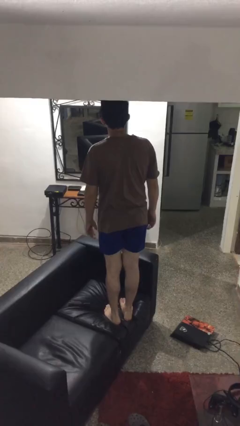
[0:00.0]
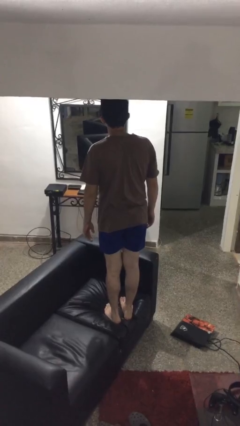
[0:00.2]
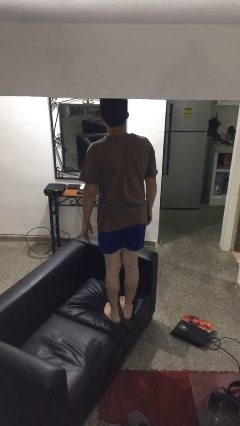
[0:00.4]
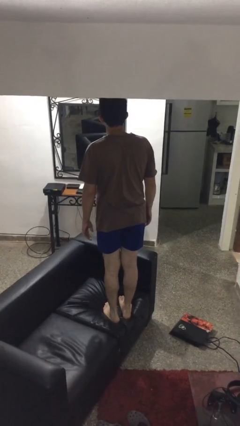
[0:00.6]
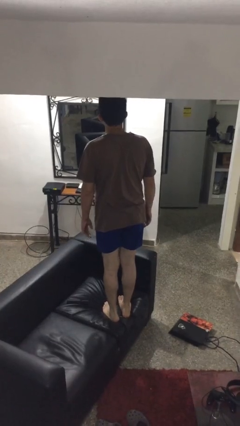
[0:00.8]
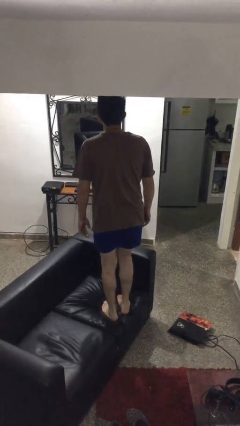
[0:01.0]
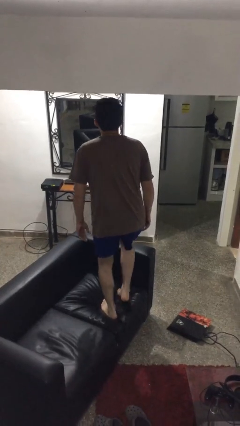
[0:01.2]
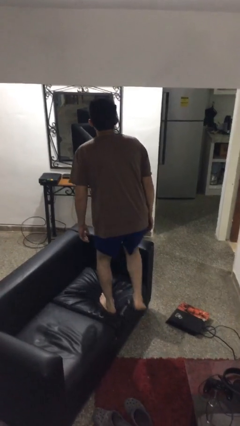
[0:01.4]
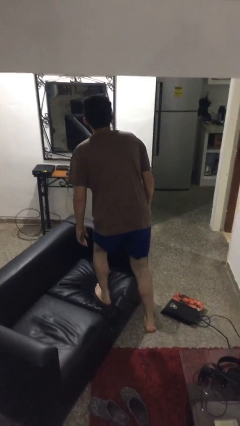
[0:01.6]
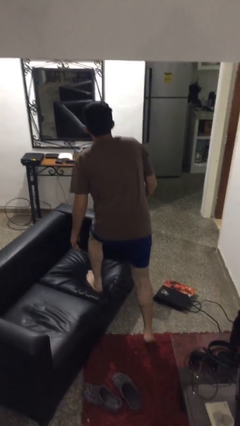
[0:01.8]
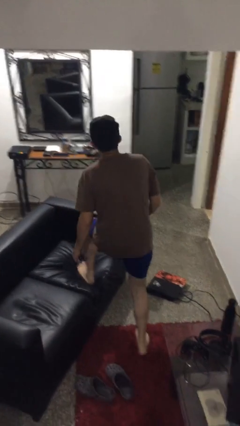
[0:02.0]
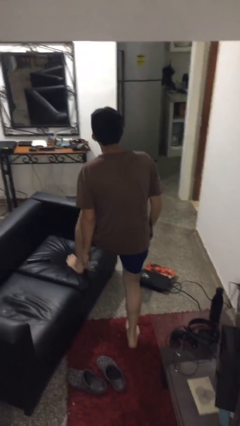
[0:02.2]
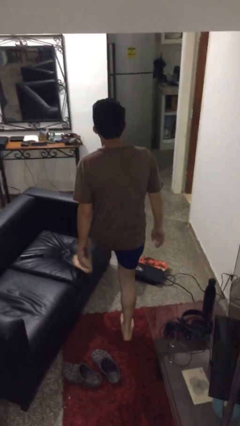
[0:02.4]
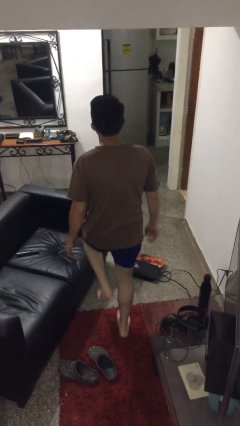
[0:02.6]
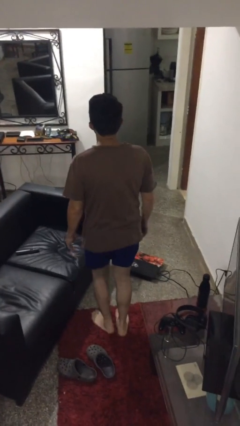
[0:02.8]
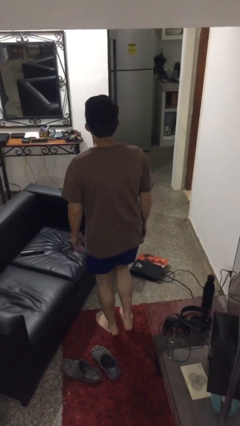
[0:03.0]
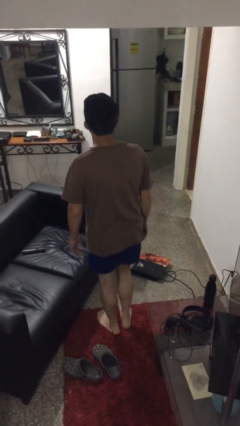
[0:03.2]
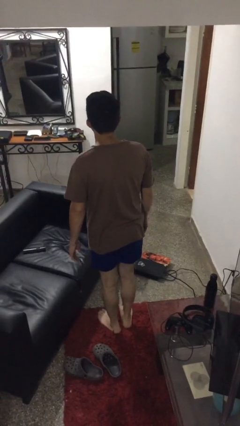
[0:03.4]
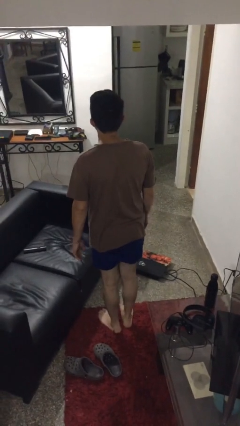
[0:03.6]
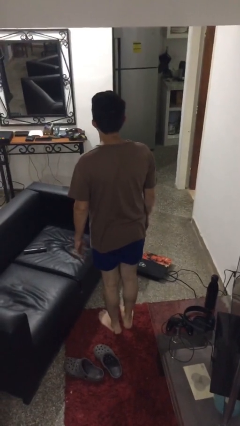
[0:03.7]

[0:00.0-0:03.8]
person climbs off couch

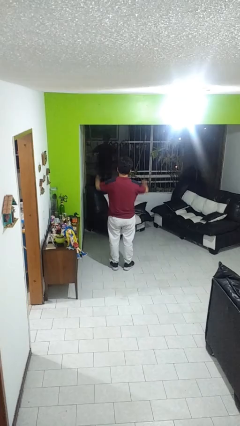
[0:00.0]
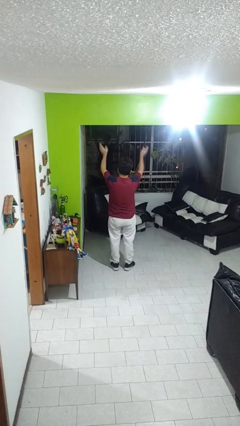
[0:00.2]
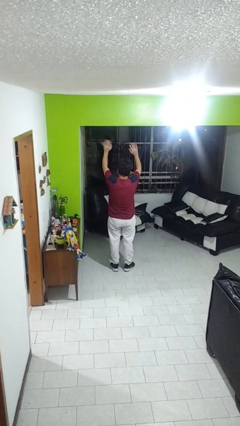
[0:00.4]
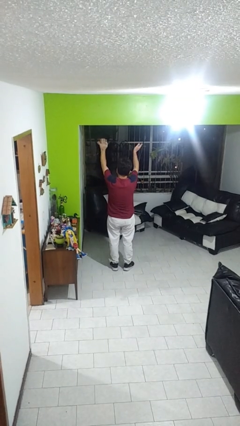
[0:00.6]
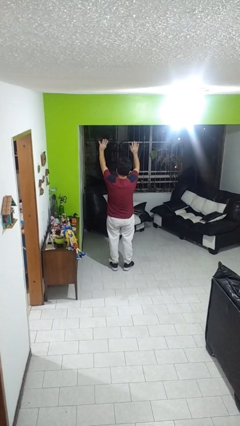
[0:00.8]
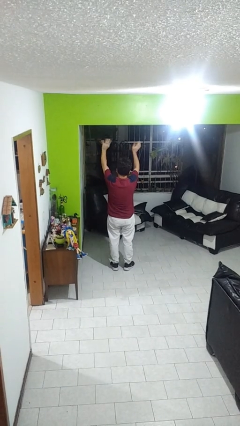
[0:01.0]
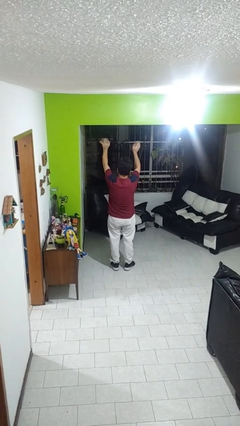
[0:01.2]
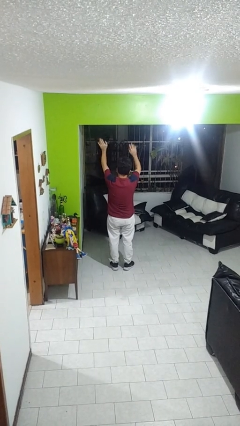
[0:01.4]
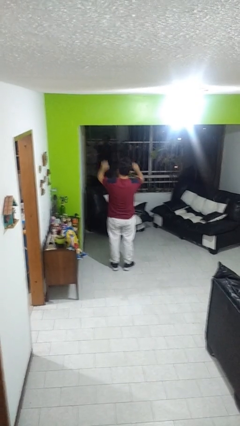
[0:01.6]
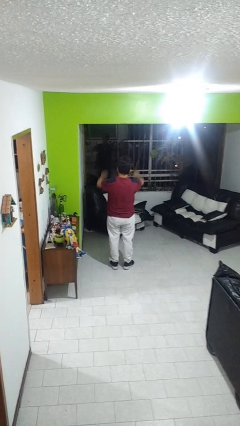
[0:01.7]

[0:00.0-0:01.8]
person waves at person

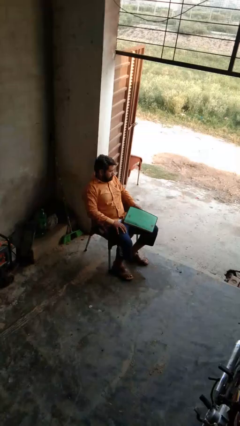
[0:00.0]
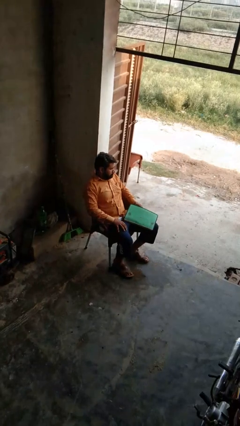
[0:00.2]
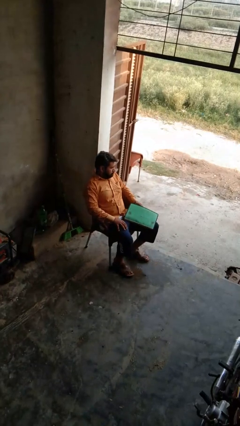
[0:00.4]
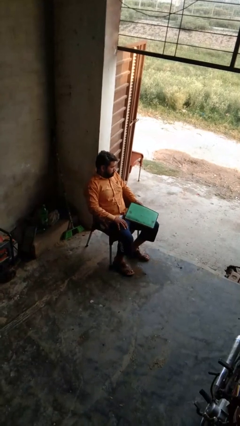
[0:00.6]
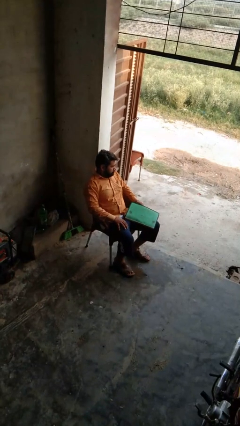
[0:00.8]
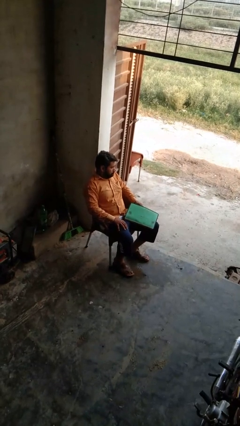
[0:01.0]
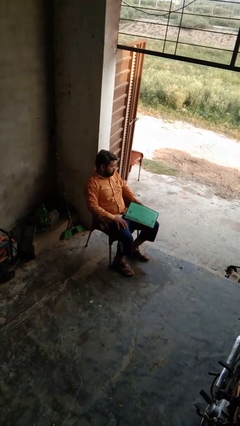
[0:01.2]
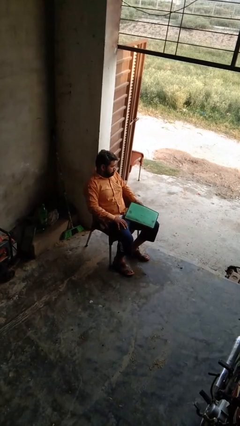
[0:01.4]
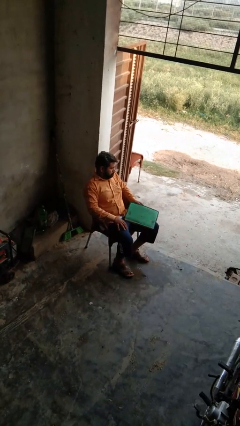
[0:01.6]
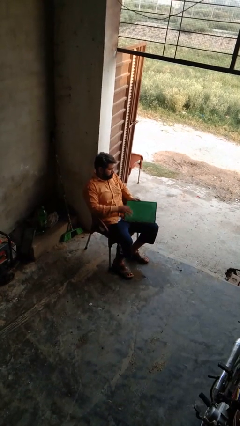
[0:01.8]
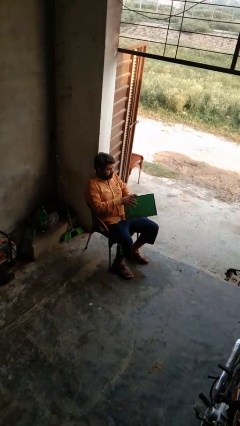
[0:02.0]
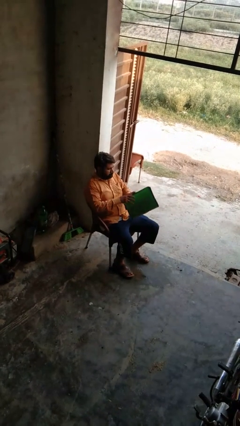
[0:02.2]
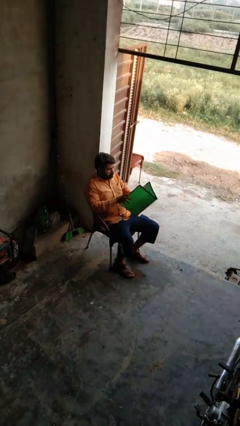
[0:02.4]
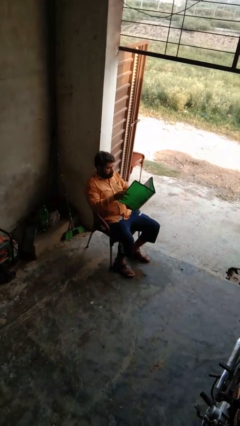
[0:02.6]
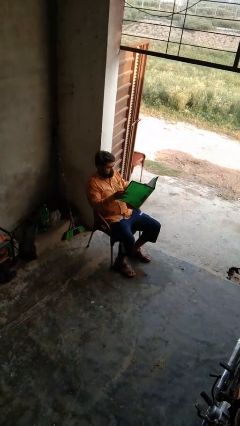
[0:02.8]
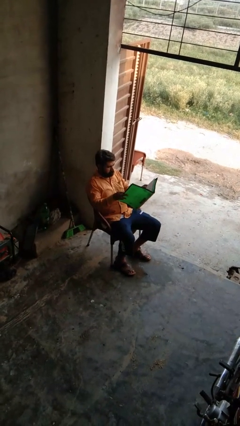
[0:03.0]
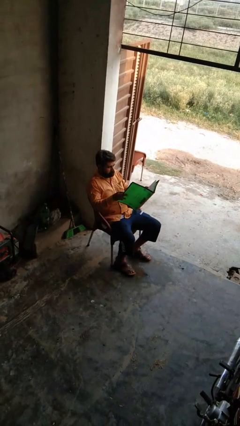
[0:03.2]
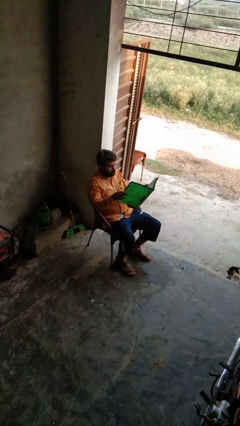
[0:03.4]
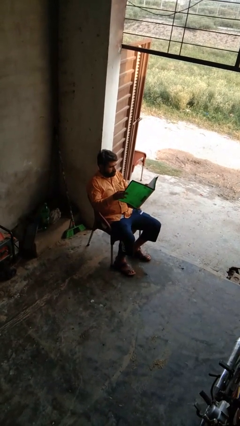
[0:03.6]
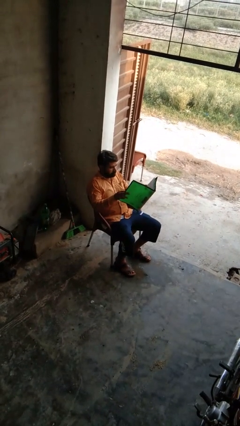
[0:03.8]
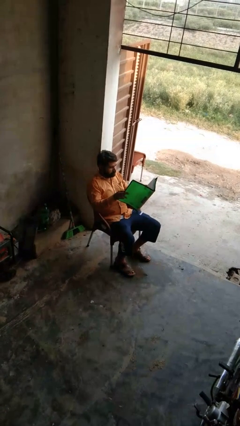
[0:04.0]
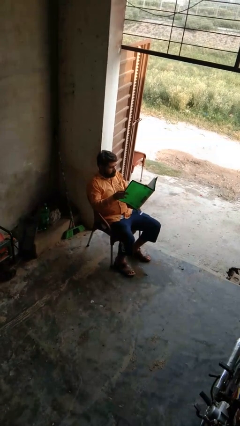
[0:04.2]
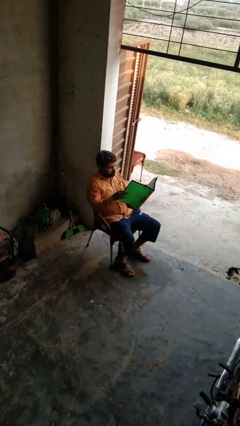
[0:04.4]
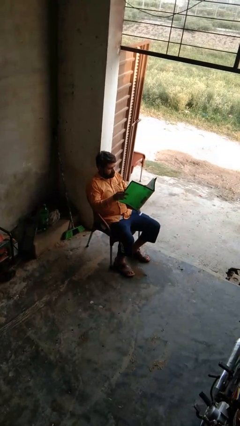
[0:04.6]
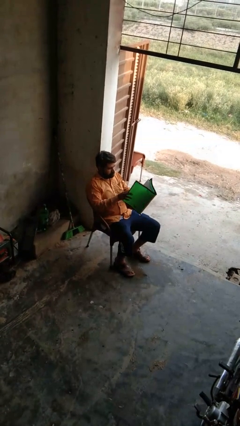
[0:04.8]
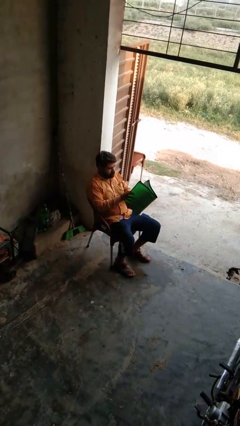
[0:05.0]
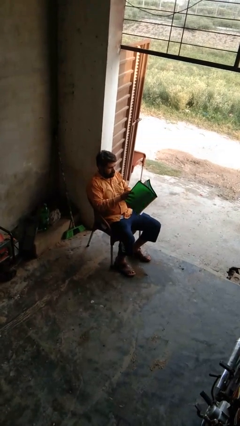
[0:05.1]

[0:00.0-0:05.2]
person reads magazine

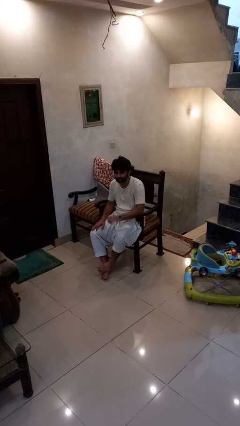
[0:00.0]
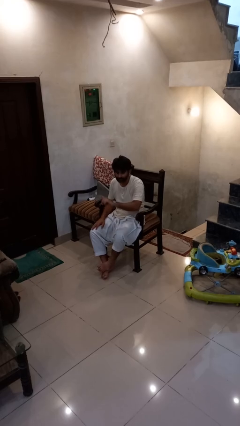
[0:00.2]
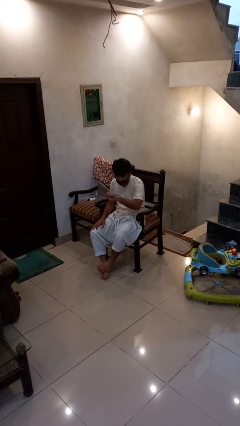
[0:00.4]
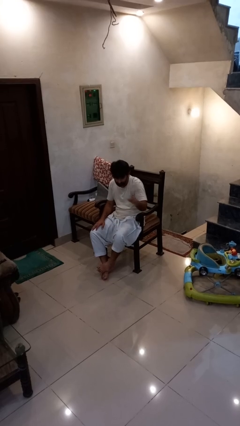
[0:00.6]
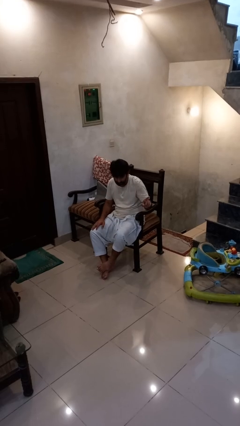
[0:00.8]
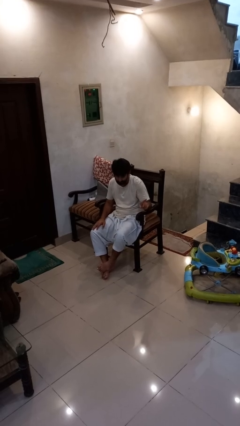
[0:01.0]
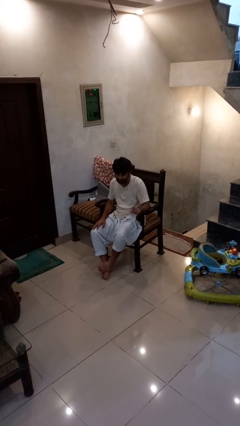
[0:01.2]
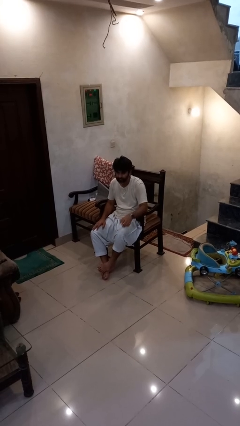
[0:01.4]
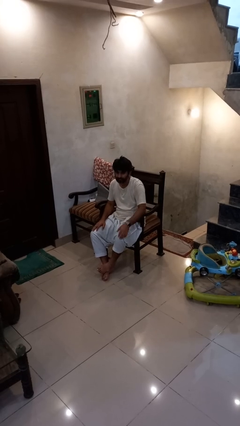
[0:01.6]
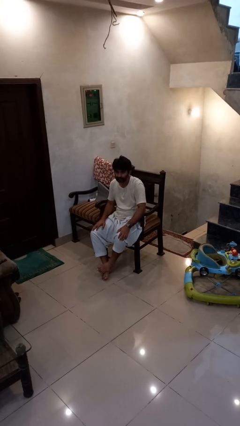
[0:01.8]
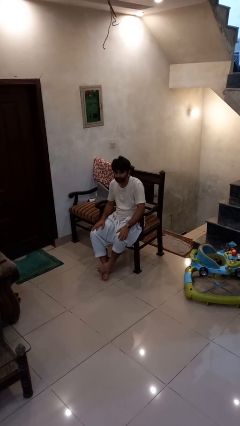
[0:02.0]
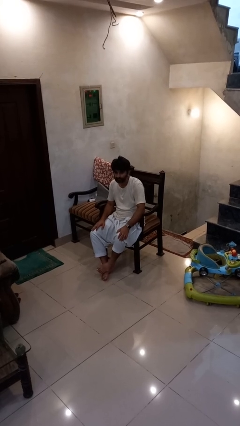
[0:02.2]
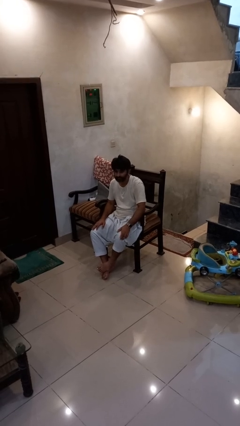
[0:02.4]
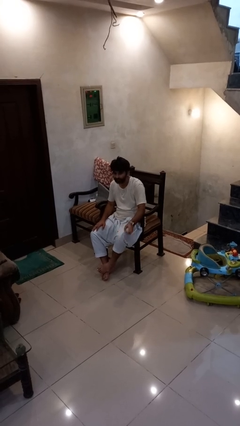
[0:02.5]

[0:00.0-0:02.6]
person gestures swipe left

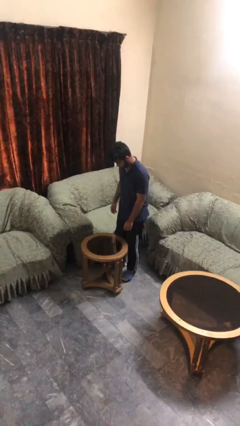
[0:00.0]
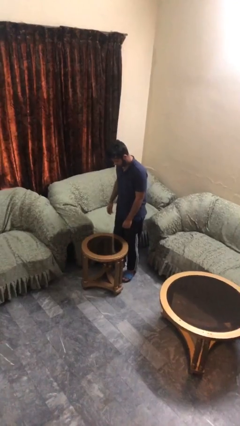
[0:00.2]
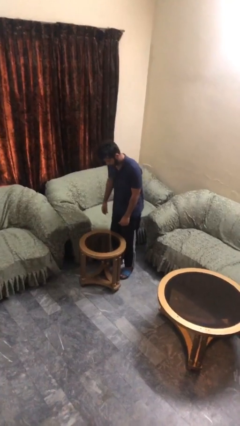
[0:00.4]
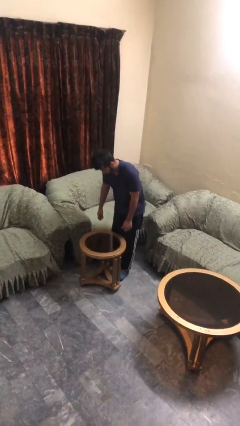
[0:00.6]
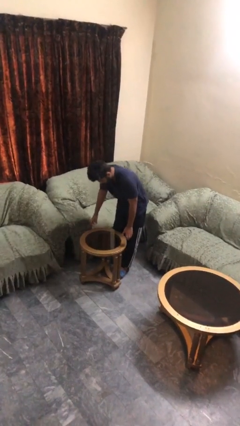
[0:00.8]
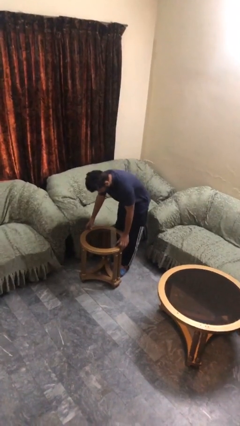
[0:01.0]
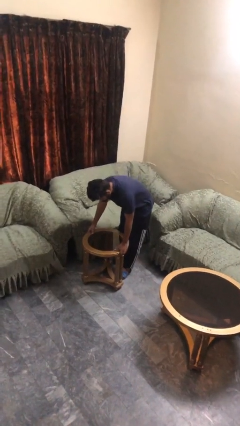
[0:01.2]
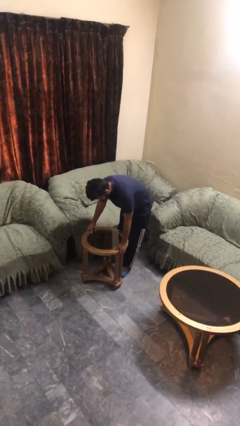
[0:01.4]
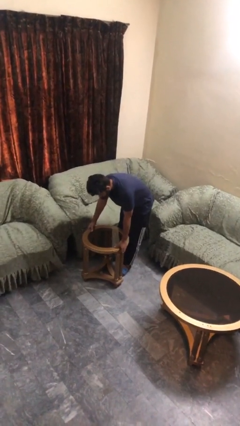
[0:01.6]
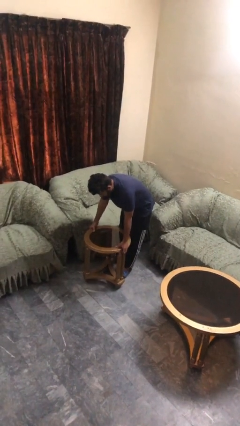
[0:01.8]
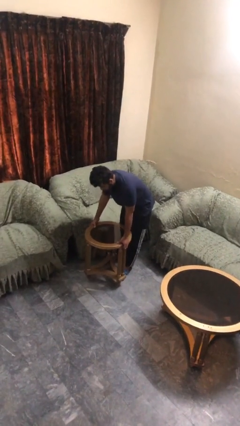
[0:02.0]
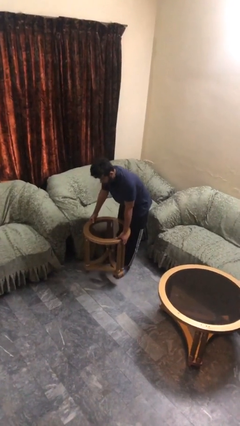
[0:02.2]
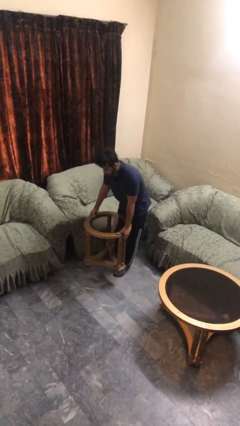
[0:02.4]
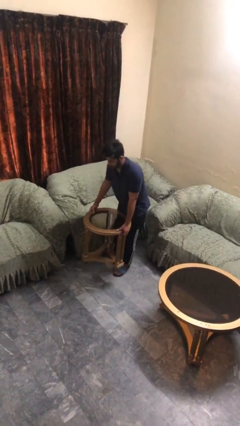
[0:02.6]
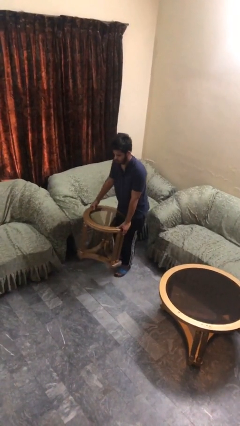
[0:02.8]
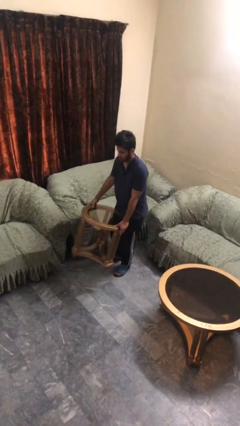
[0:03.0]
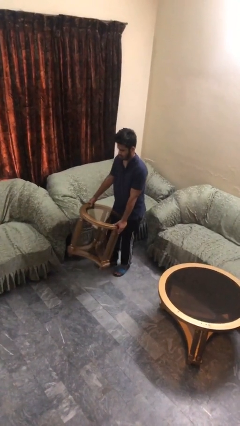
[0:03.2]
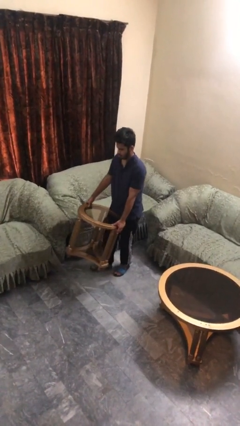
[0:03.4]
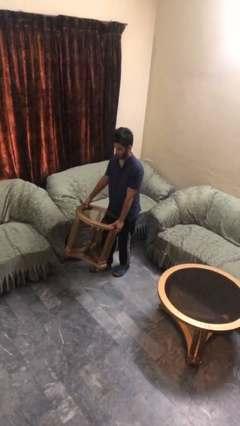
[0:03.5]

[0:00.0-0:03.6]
person picks up object from floor

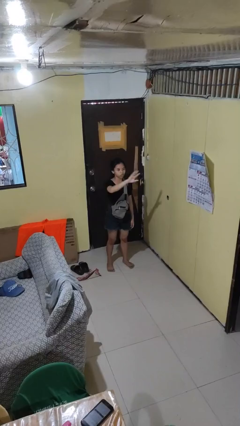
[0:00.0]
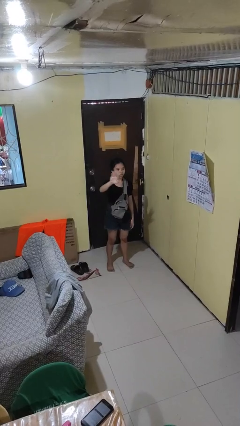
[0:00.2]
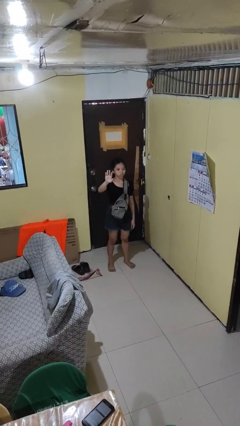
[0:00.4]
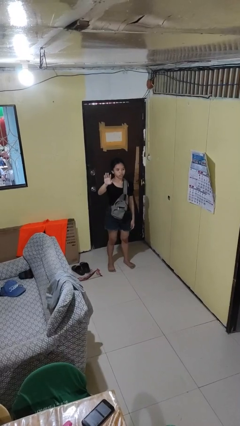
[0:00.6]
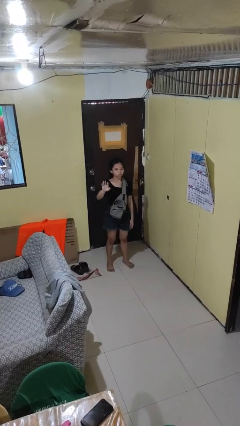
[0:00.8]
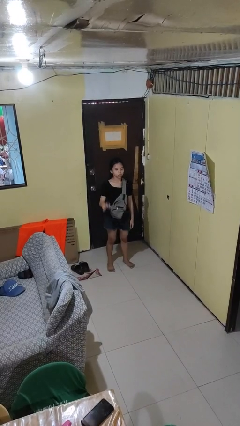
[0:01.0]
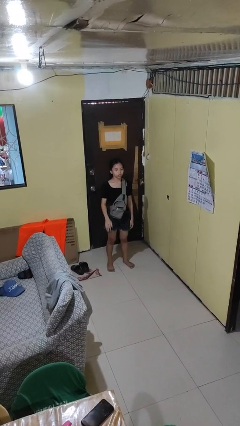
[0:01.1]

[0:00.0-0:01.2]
person gestures swipe right
